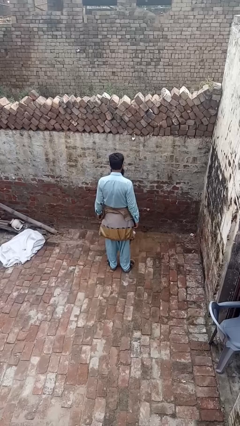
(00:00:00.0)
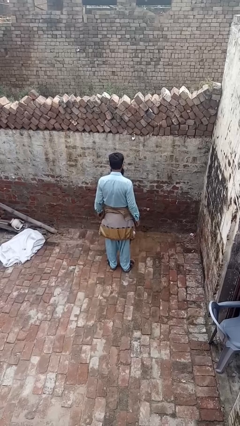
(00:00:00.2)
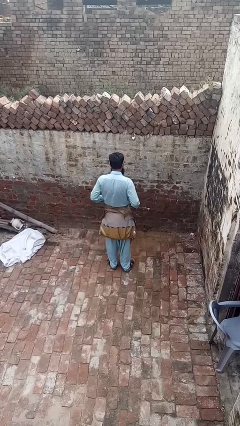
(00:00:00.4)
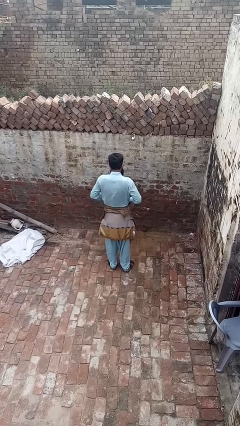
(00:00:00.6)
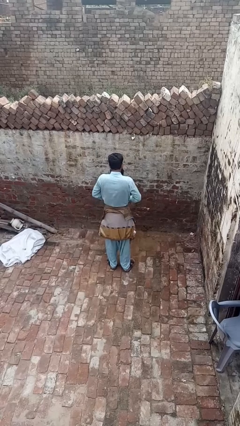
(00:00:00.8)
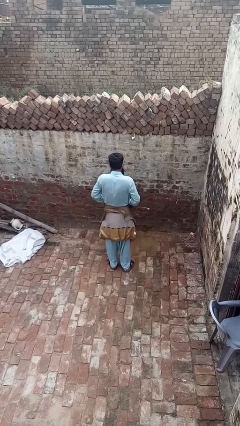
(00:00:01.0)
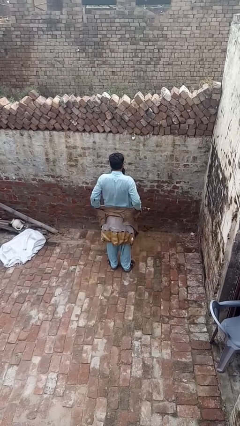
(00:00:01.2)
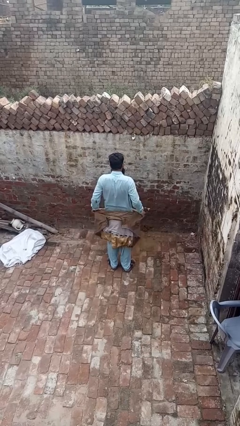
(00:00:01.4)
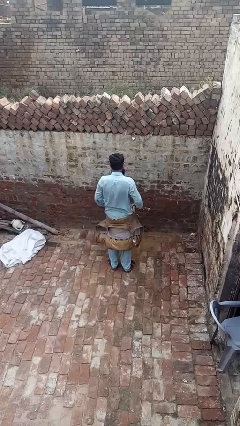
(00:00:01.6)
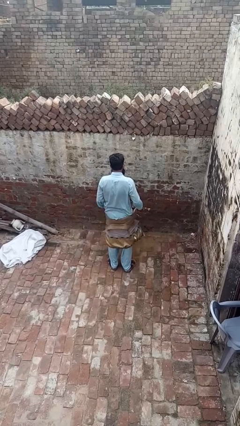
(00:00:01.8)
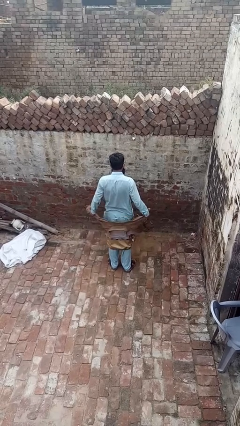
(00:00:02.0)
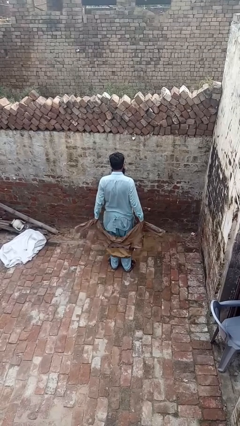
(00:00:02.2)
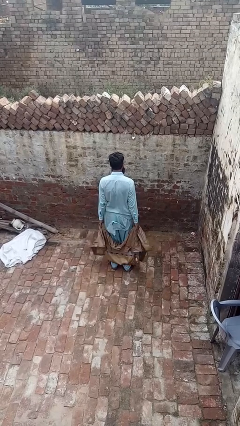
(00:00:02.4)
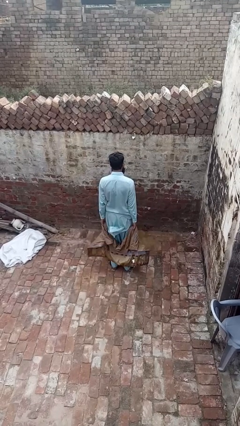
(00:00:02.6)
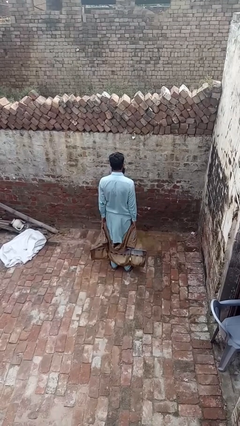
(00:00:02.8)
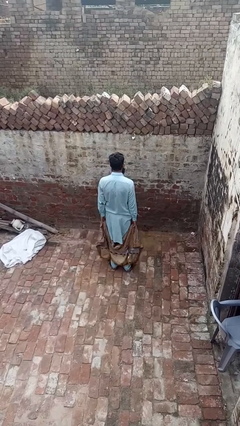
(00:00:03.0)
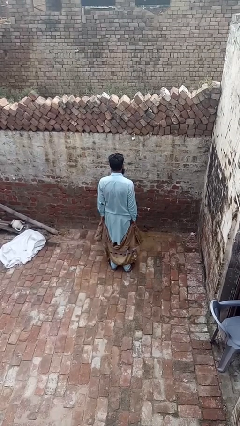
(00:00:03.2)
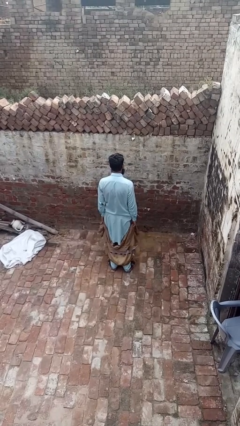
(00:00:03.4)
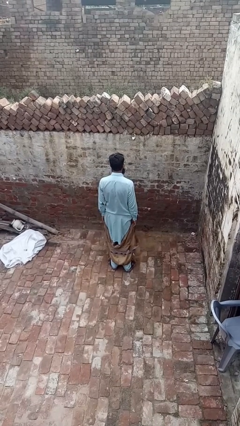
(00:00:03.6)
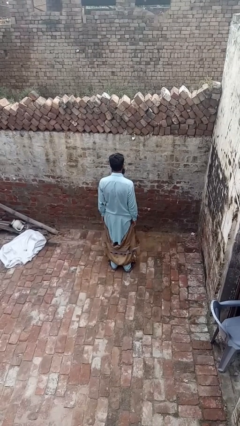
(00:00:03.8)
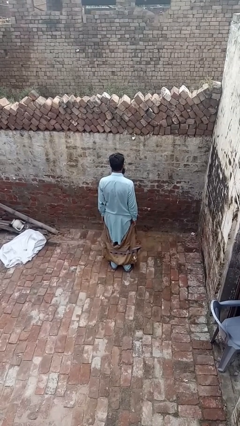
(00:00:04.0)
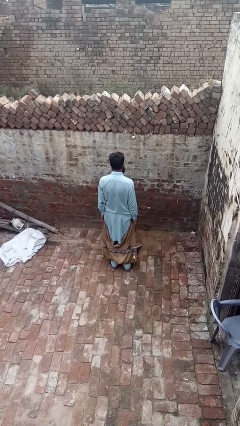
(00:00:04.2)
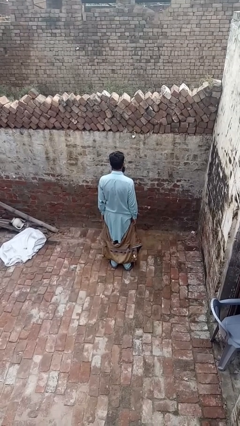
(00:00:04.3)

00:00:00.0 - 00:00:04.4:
person unties jacket around waist

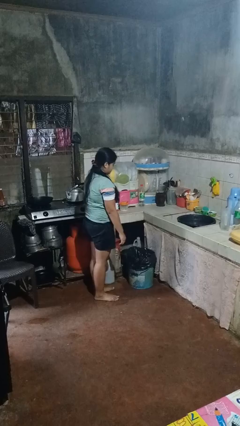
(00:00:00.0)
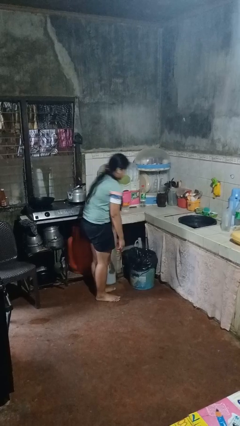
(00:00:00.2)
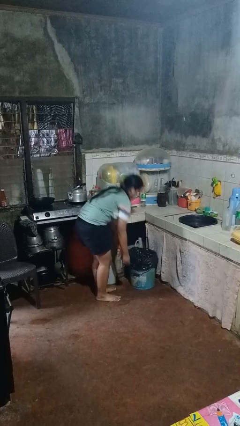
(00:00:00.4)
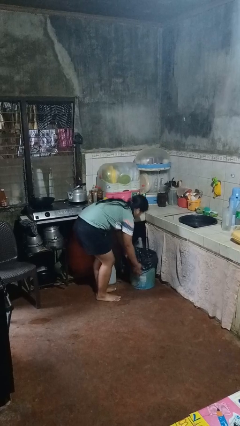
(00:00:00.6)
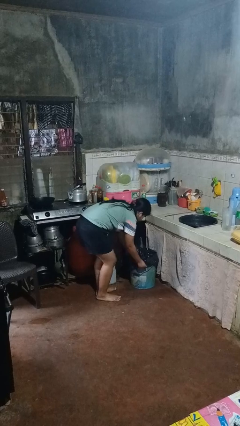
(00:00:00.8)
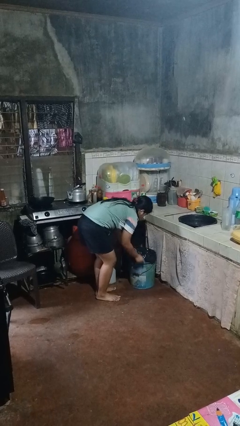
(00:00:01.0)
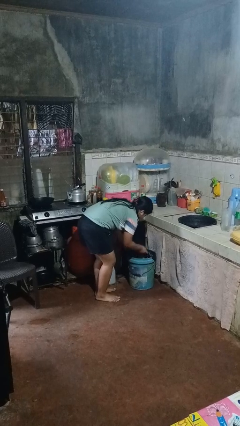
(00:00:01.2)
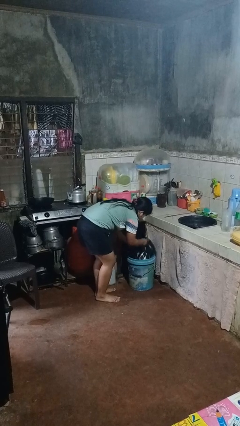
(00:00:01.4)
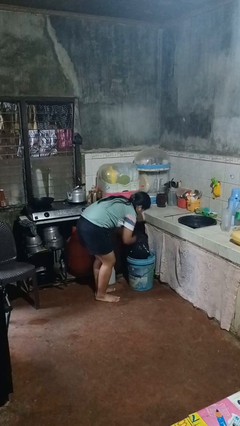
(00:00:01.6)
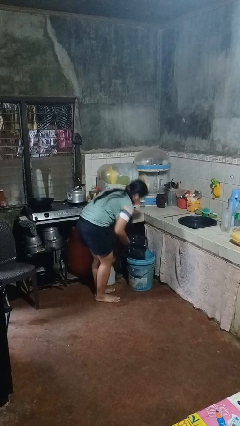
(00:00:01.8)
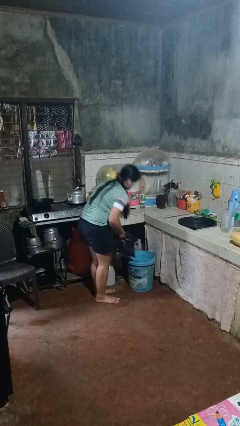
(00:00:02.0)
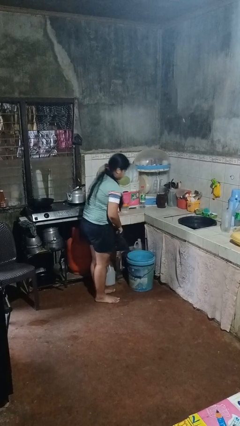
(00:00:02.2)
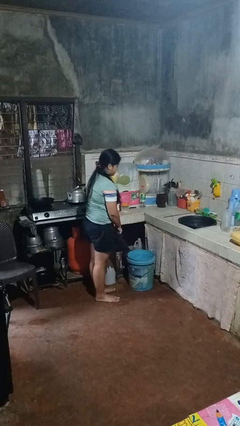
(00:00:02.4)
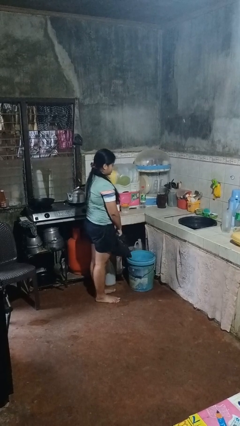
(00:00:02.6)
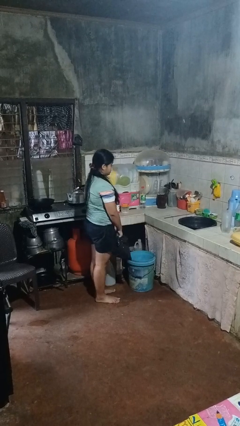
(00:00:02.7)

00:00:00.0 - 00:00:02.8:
person removes trashbag from trashcan

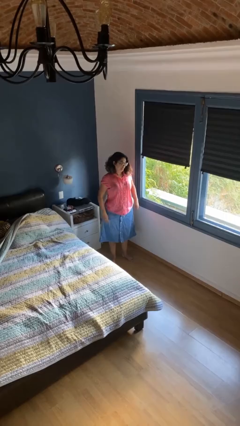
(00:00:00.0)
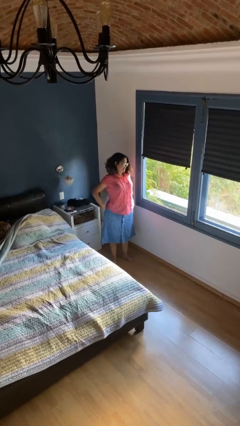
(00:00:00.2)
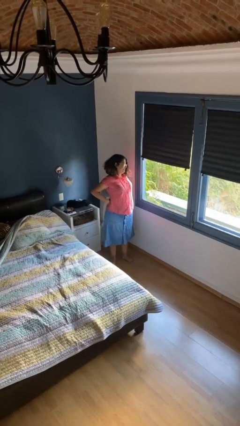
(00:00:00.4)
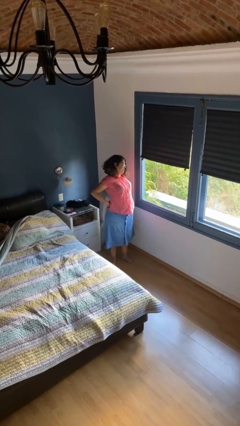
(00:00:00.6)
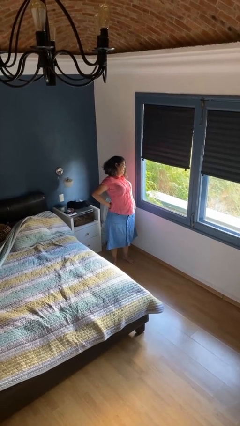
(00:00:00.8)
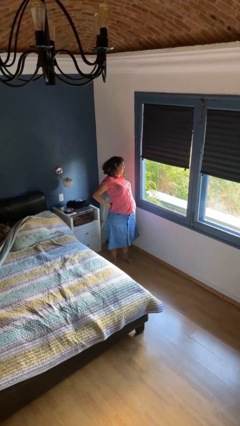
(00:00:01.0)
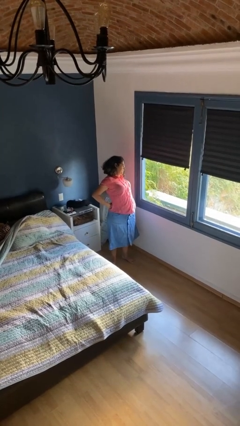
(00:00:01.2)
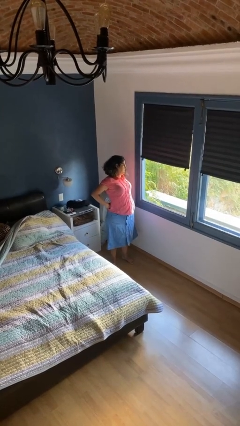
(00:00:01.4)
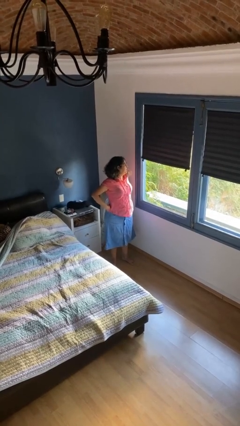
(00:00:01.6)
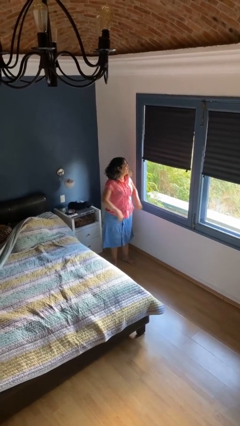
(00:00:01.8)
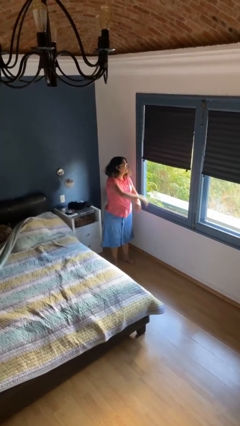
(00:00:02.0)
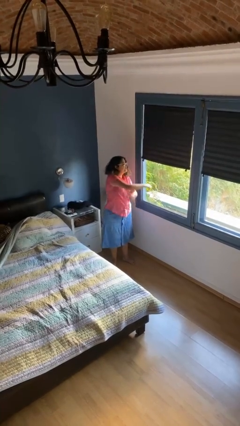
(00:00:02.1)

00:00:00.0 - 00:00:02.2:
person stretches back

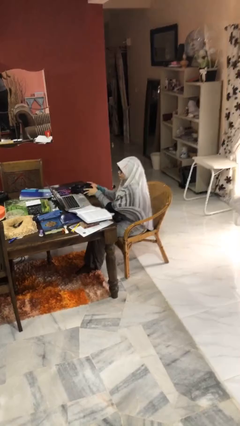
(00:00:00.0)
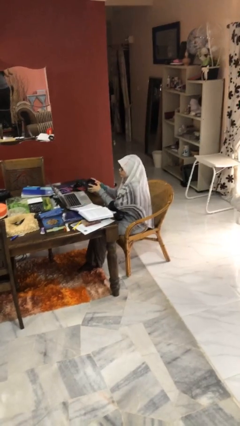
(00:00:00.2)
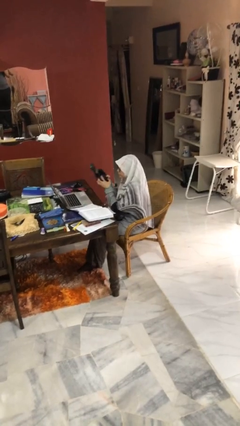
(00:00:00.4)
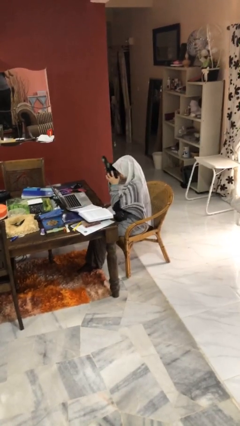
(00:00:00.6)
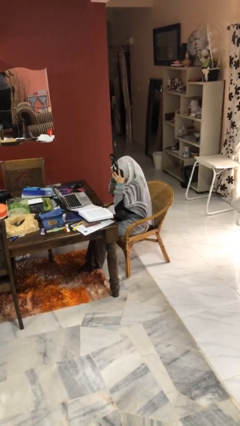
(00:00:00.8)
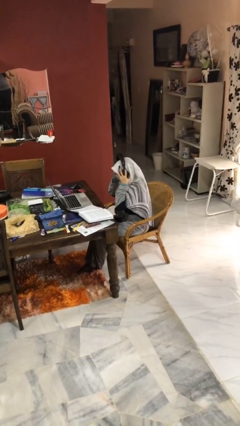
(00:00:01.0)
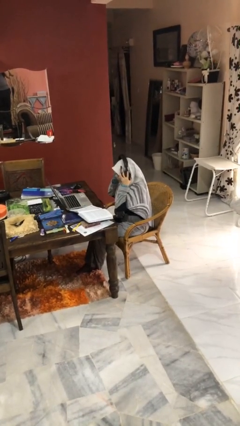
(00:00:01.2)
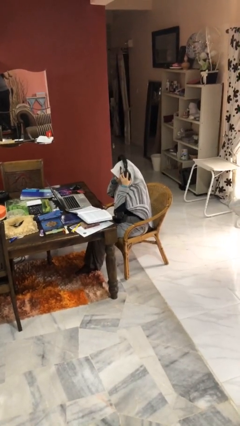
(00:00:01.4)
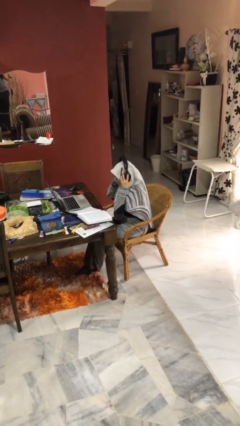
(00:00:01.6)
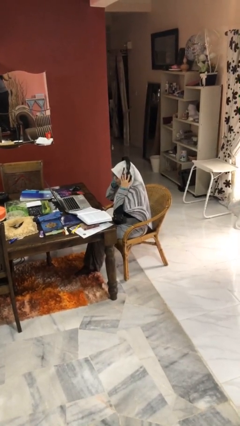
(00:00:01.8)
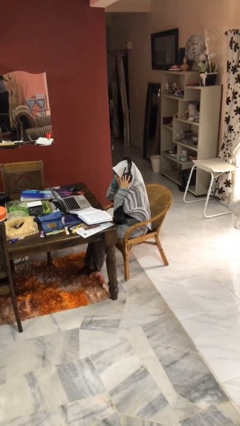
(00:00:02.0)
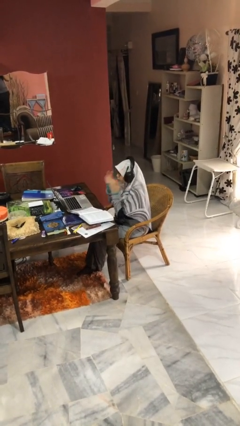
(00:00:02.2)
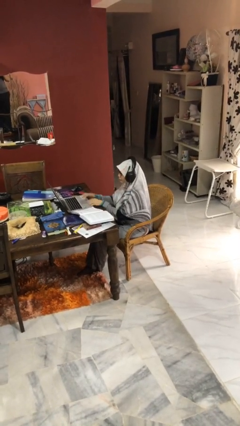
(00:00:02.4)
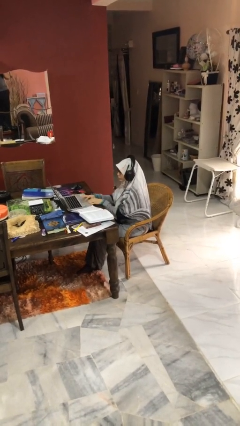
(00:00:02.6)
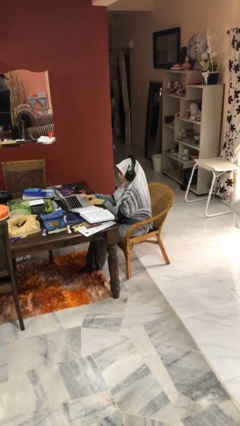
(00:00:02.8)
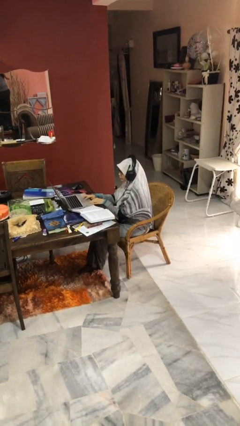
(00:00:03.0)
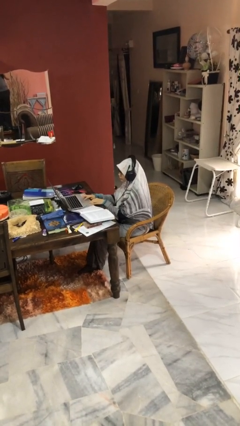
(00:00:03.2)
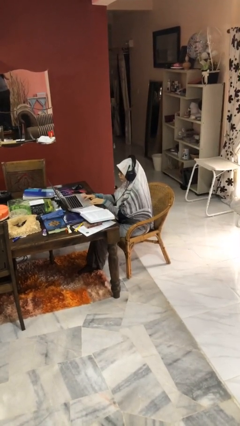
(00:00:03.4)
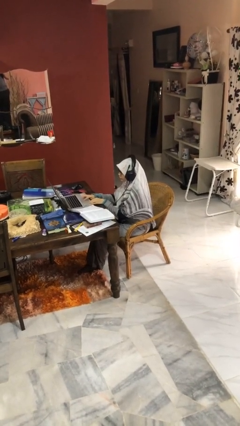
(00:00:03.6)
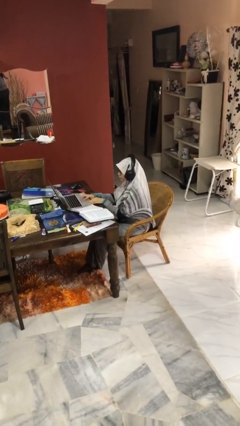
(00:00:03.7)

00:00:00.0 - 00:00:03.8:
person puts on headphones

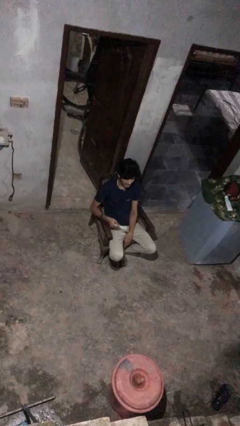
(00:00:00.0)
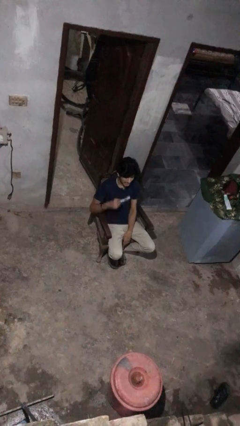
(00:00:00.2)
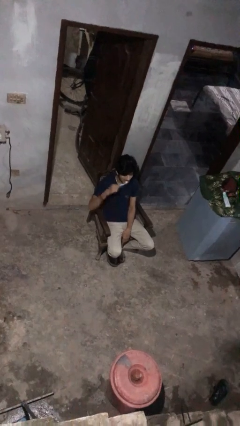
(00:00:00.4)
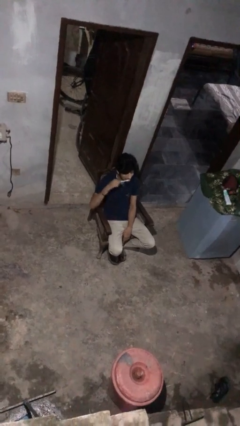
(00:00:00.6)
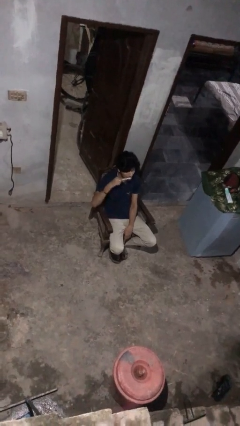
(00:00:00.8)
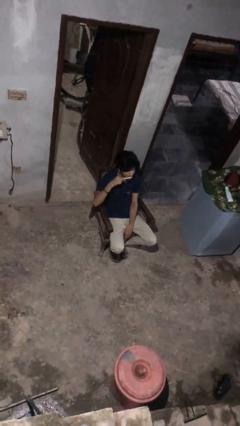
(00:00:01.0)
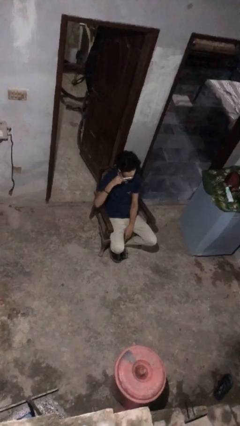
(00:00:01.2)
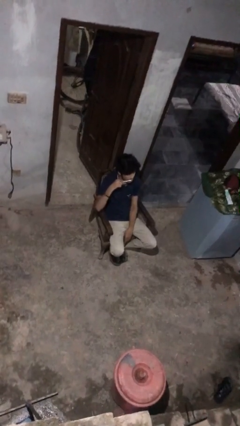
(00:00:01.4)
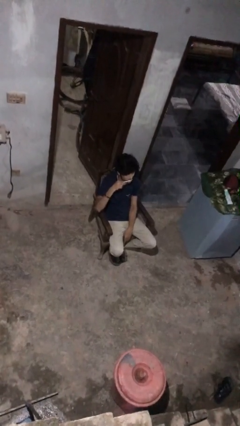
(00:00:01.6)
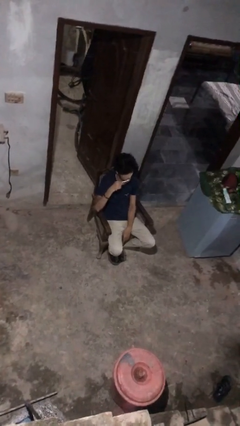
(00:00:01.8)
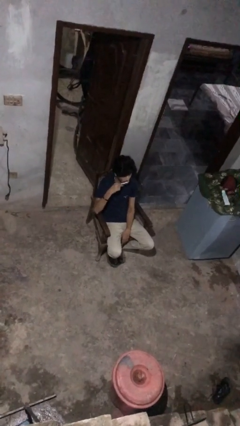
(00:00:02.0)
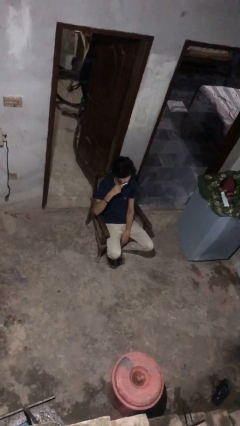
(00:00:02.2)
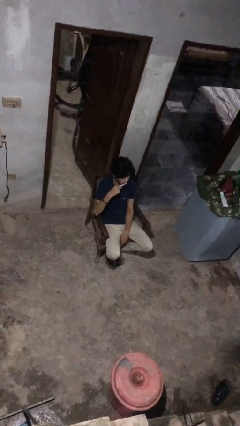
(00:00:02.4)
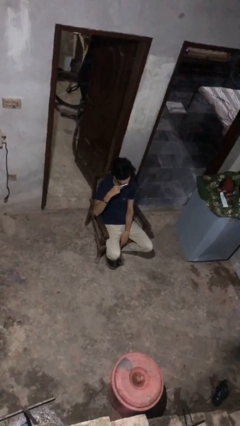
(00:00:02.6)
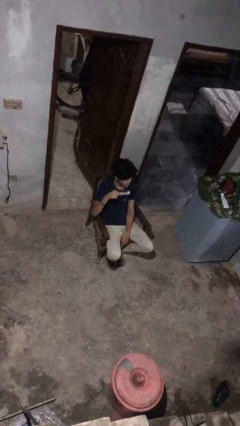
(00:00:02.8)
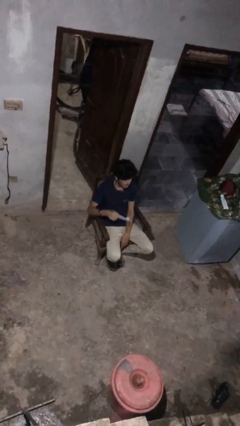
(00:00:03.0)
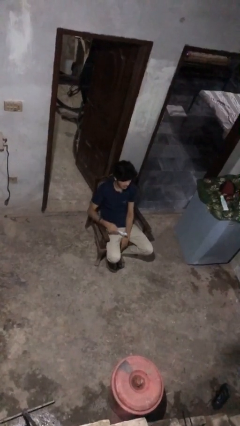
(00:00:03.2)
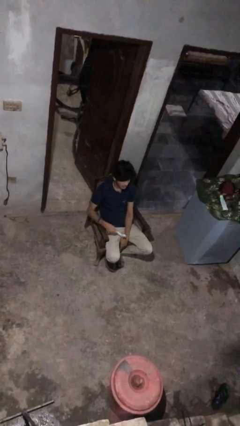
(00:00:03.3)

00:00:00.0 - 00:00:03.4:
person brushes teeth

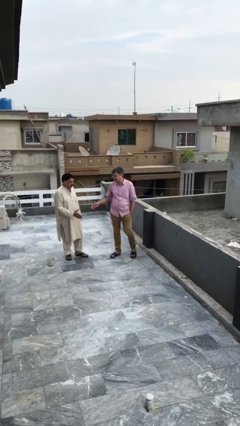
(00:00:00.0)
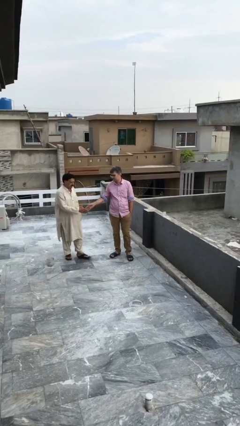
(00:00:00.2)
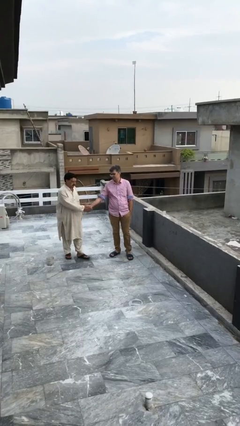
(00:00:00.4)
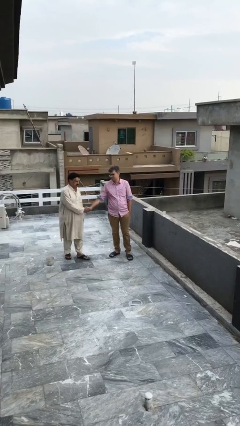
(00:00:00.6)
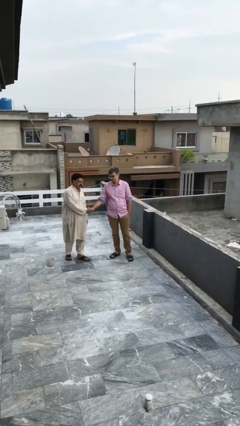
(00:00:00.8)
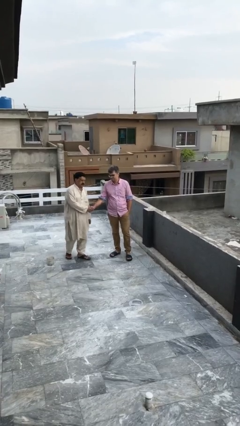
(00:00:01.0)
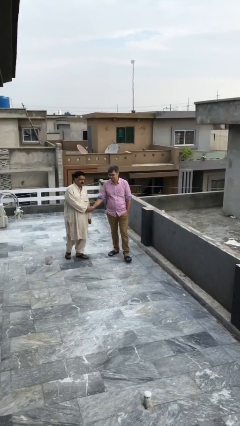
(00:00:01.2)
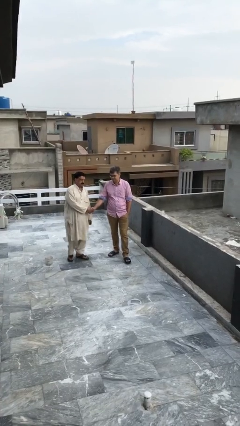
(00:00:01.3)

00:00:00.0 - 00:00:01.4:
person shakes hand
